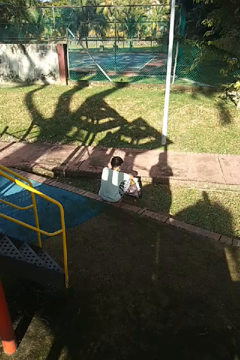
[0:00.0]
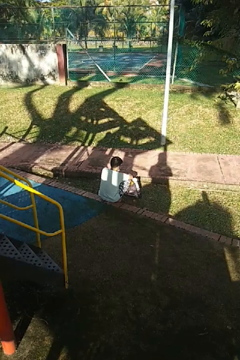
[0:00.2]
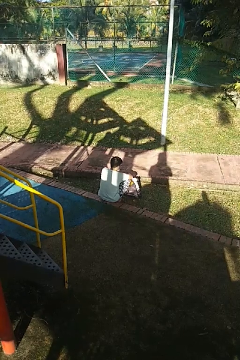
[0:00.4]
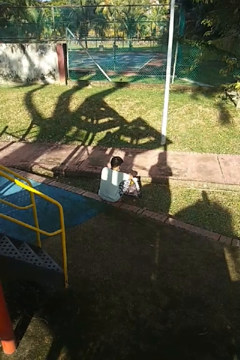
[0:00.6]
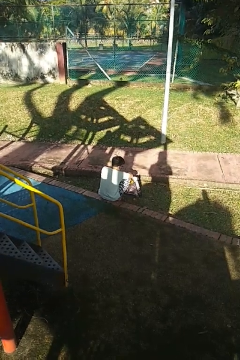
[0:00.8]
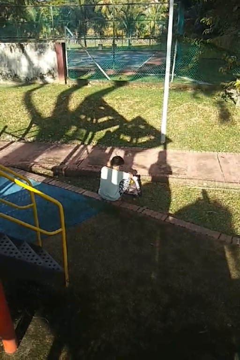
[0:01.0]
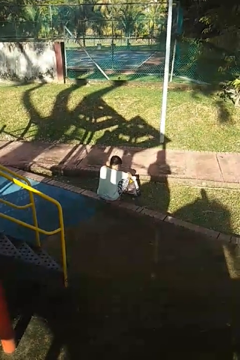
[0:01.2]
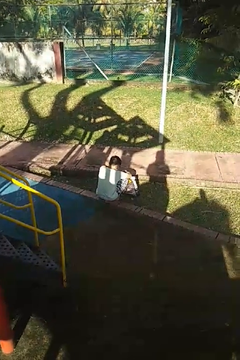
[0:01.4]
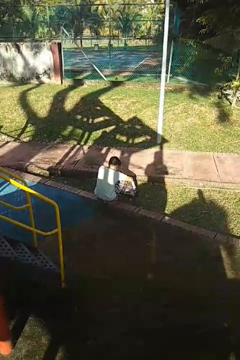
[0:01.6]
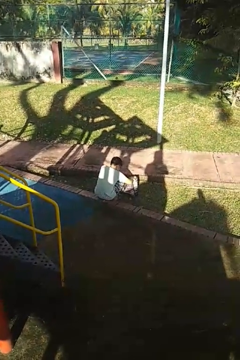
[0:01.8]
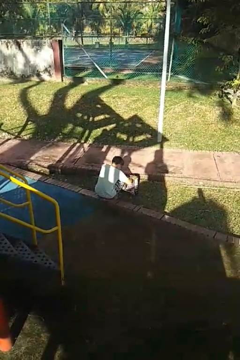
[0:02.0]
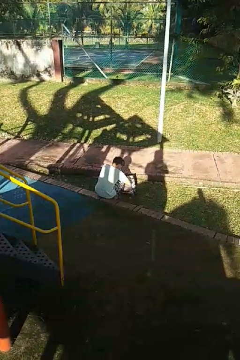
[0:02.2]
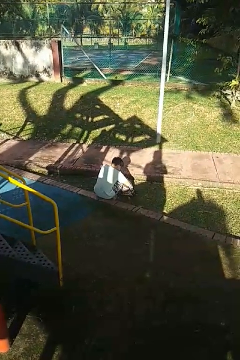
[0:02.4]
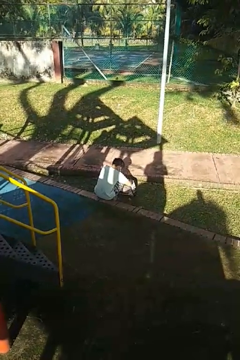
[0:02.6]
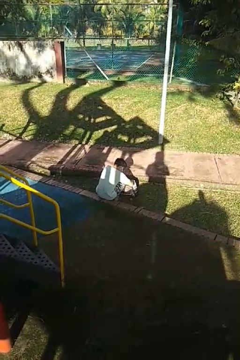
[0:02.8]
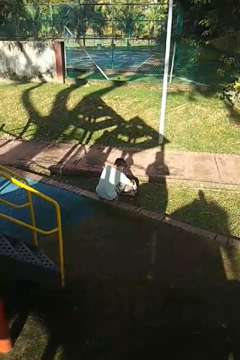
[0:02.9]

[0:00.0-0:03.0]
person searches in bag

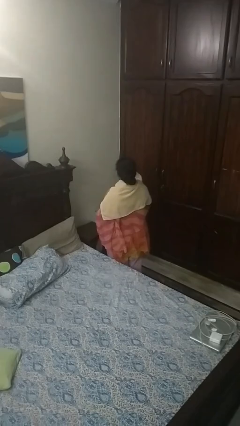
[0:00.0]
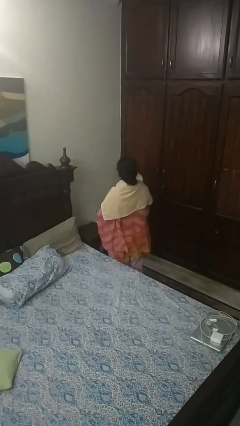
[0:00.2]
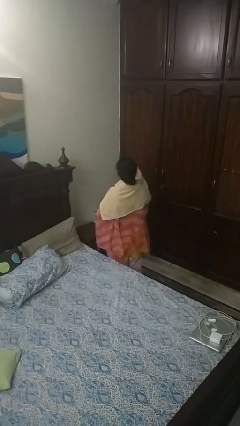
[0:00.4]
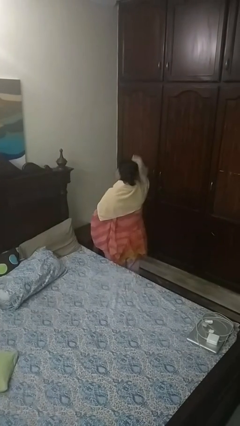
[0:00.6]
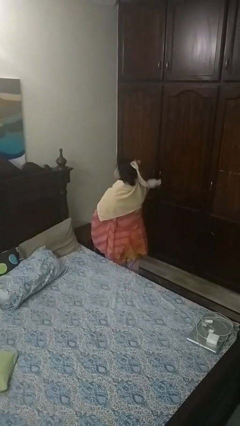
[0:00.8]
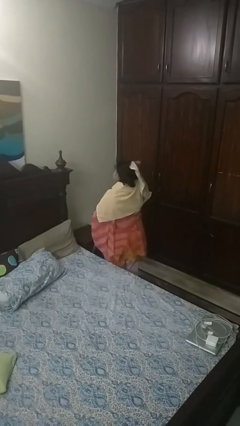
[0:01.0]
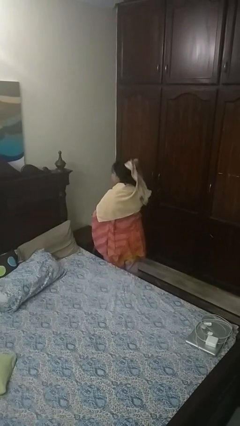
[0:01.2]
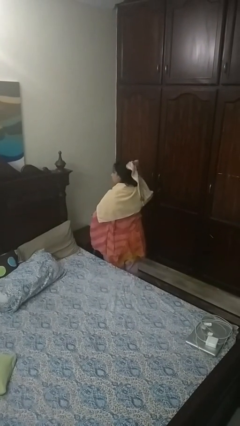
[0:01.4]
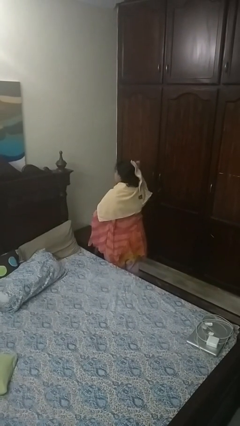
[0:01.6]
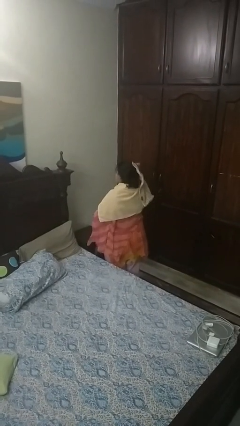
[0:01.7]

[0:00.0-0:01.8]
person dries hair with towel

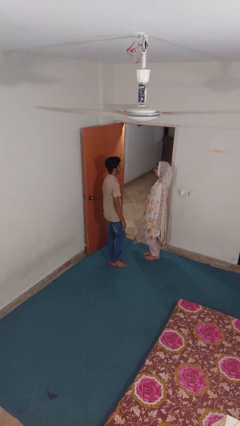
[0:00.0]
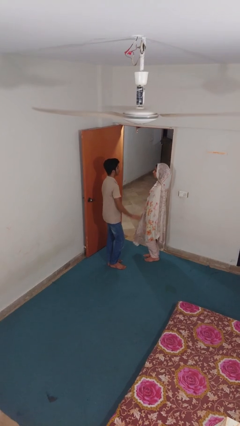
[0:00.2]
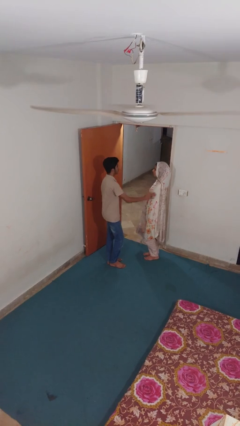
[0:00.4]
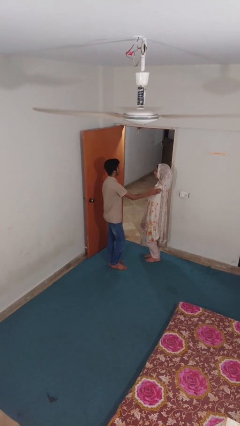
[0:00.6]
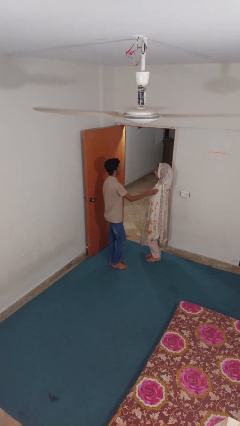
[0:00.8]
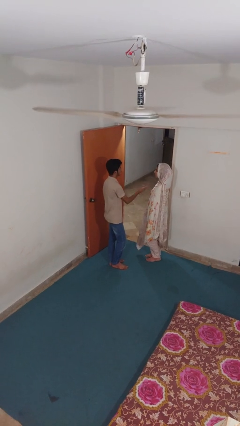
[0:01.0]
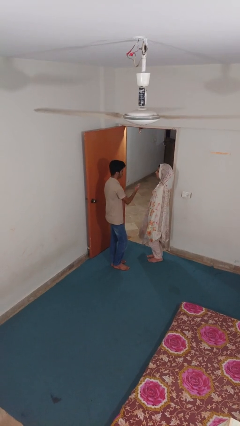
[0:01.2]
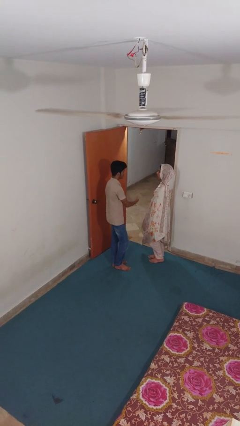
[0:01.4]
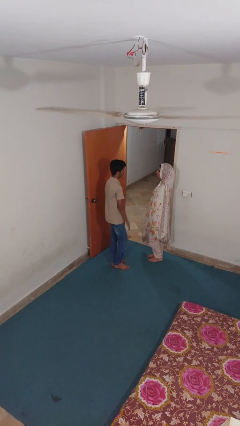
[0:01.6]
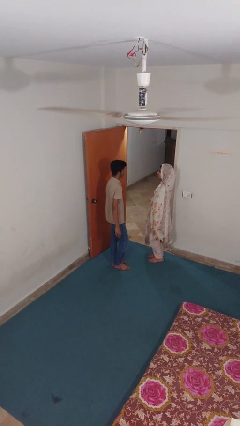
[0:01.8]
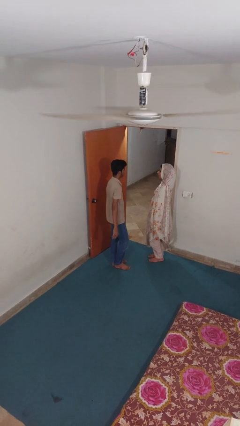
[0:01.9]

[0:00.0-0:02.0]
person shoves person

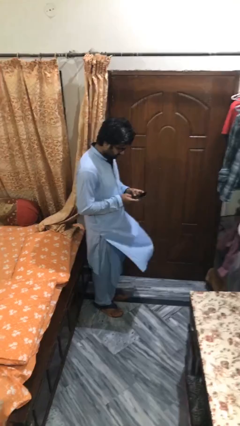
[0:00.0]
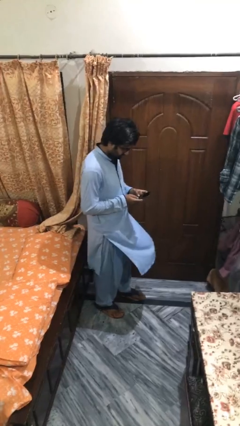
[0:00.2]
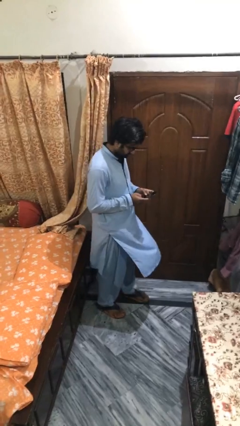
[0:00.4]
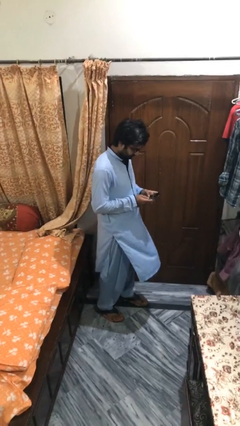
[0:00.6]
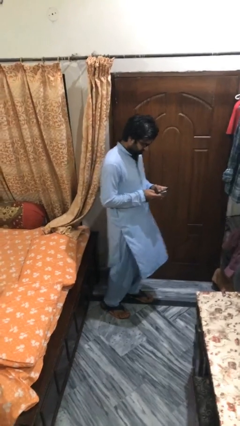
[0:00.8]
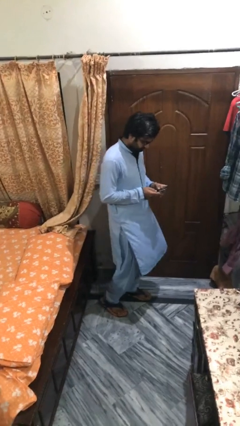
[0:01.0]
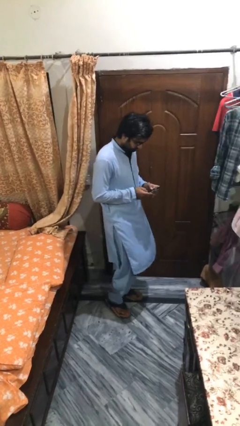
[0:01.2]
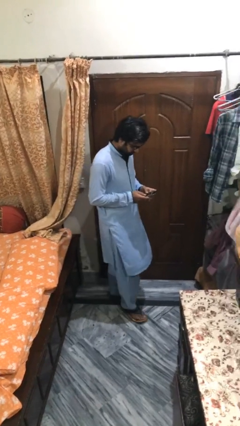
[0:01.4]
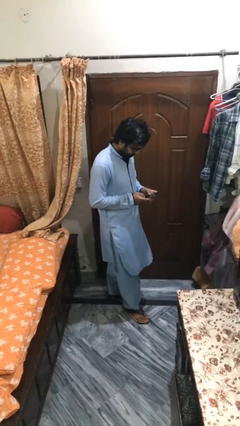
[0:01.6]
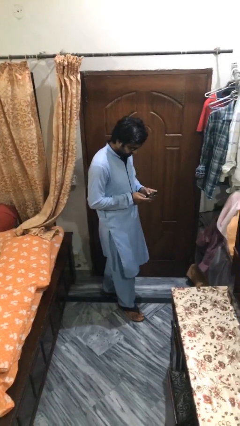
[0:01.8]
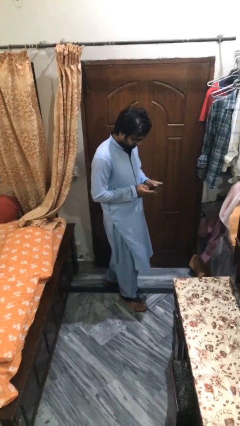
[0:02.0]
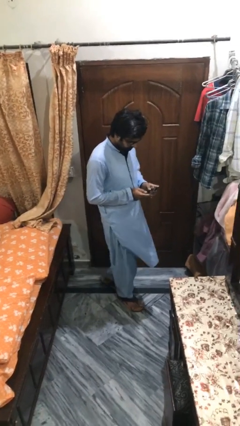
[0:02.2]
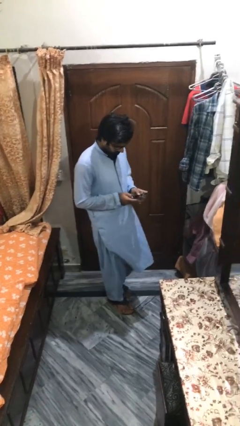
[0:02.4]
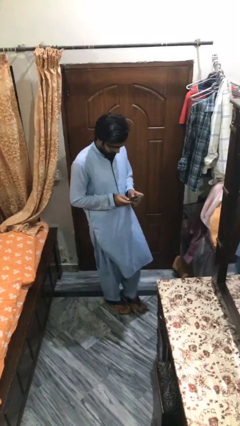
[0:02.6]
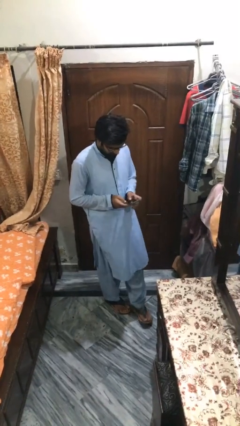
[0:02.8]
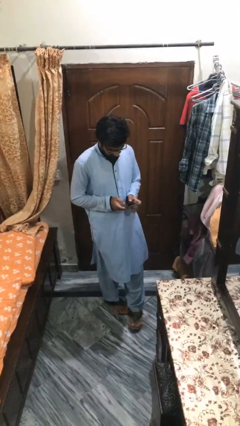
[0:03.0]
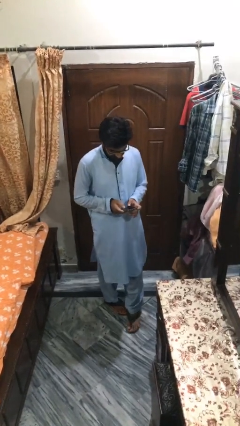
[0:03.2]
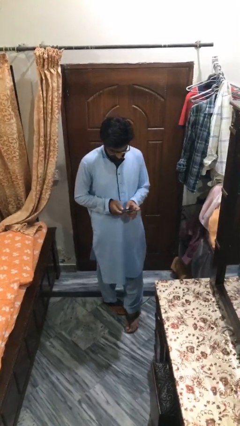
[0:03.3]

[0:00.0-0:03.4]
person texts on phone

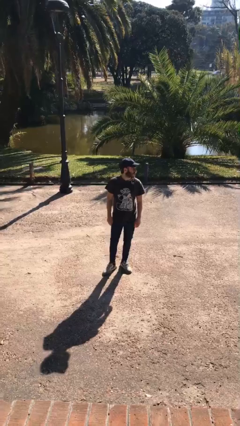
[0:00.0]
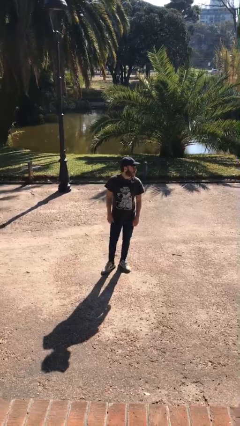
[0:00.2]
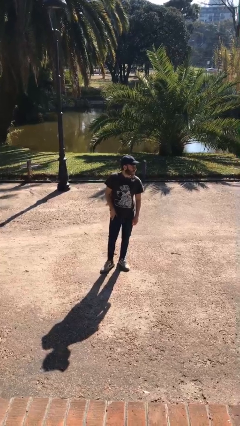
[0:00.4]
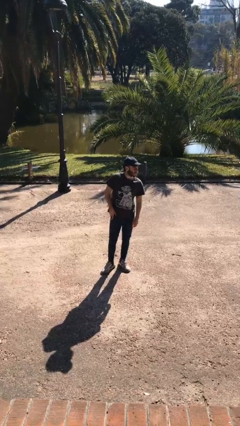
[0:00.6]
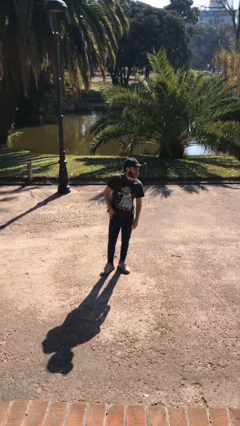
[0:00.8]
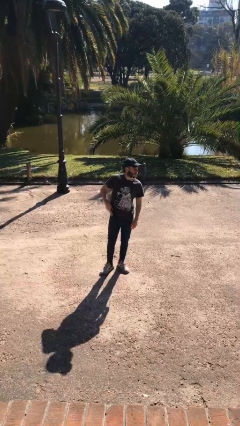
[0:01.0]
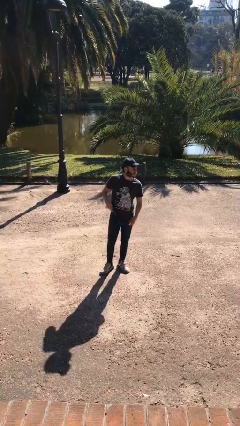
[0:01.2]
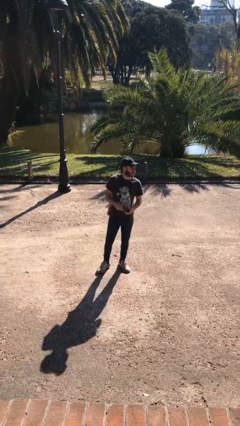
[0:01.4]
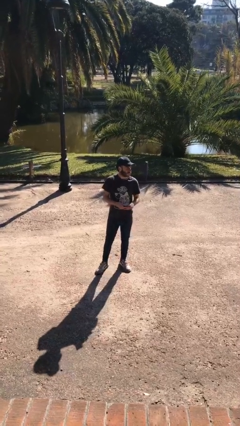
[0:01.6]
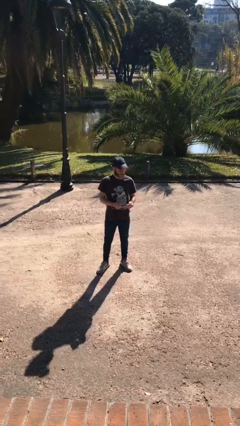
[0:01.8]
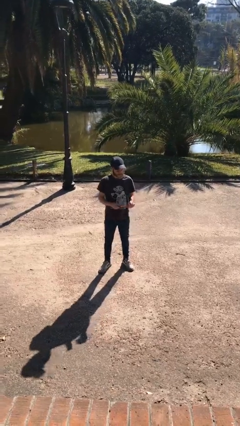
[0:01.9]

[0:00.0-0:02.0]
person takes phone from pocket

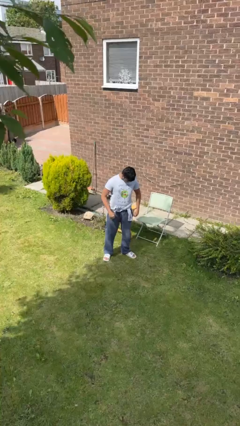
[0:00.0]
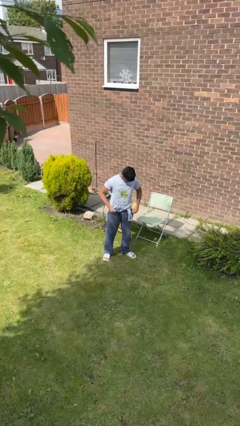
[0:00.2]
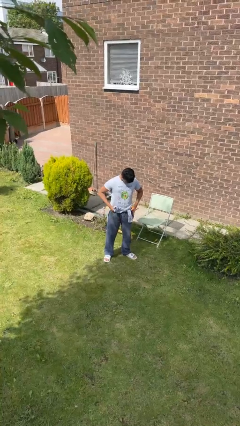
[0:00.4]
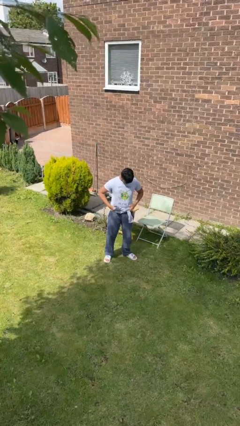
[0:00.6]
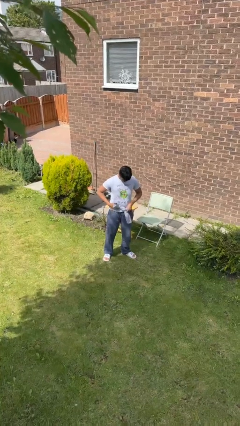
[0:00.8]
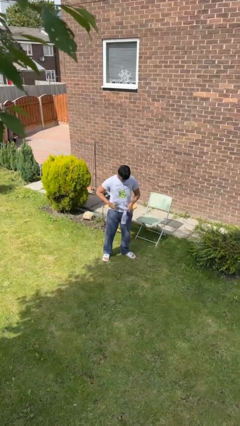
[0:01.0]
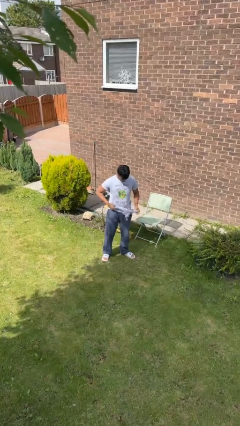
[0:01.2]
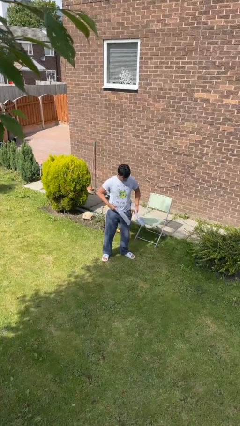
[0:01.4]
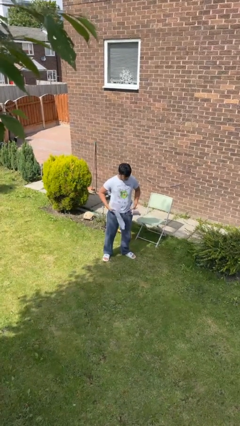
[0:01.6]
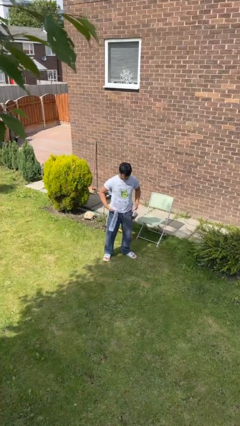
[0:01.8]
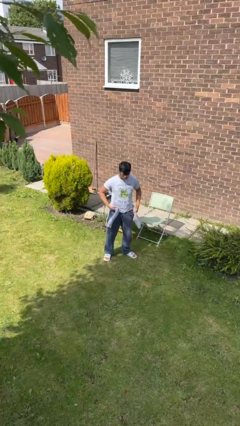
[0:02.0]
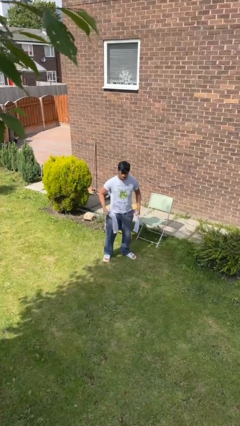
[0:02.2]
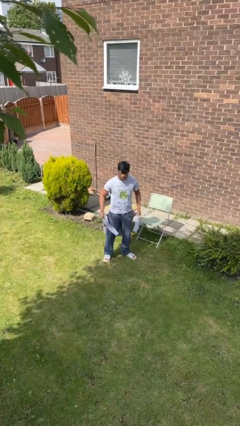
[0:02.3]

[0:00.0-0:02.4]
person unties jacket around waist

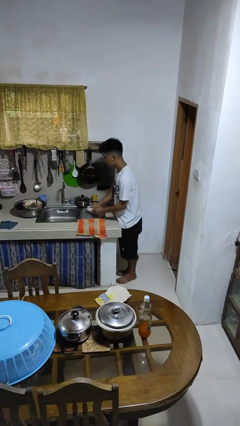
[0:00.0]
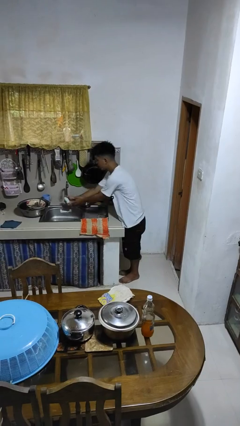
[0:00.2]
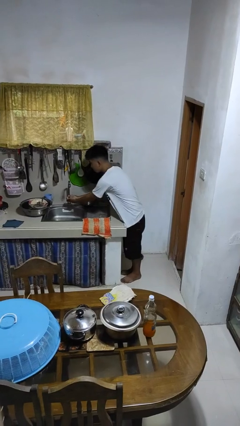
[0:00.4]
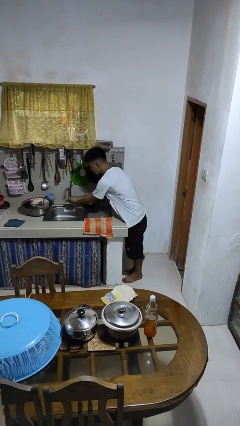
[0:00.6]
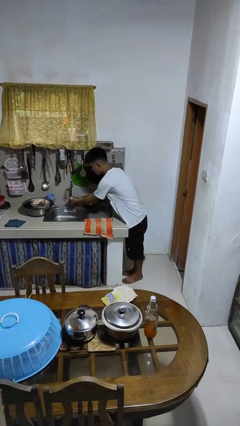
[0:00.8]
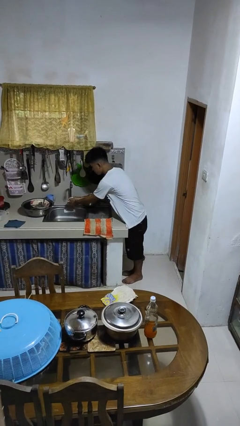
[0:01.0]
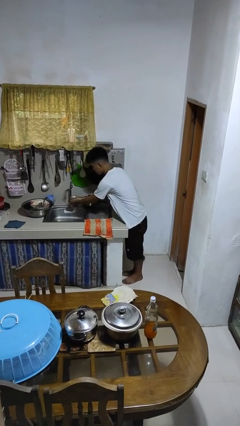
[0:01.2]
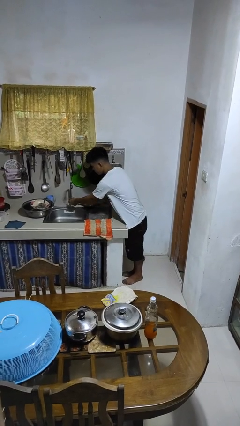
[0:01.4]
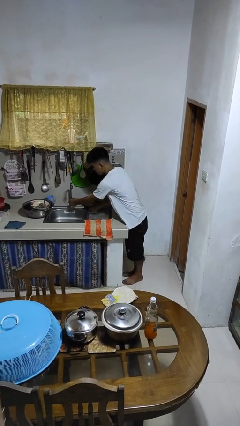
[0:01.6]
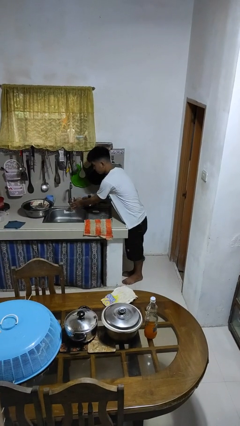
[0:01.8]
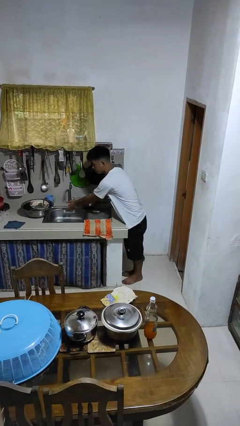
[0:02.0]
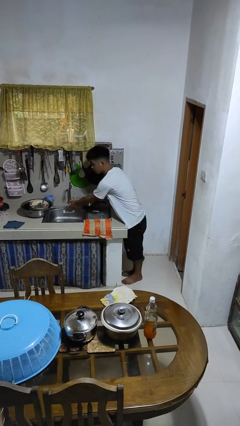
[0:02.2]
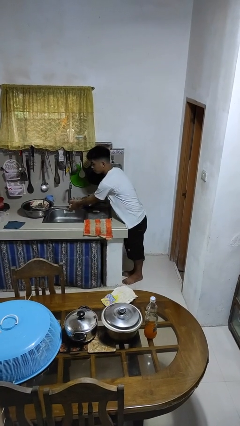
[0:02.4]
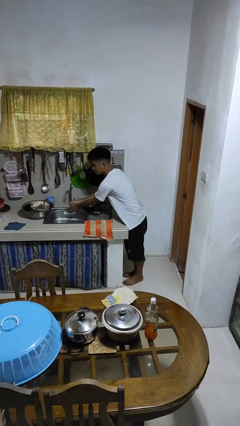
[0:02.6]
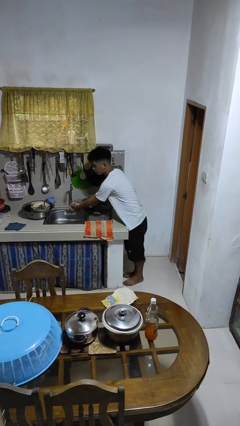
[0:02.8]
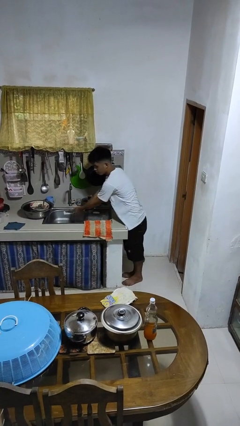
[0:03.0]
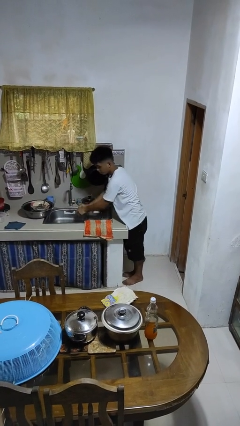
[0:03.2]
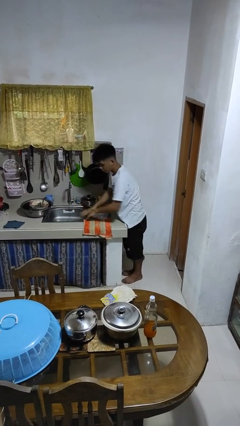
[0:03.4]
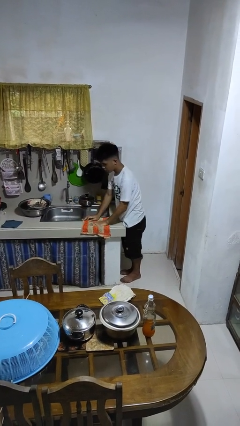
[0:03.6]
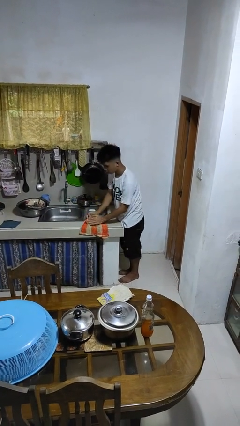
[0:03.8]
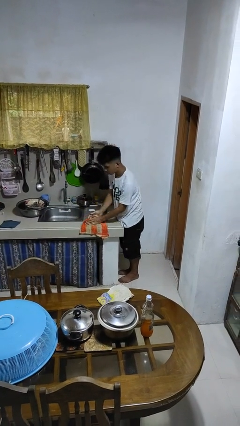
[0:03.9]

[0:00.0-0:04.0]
person washes hands
